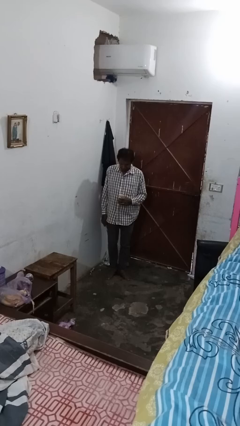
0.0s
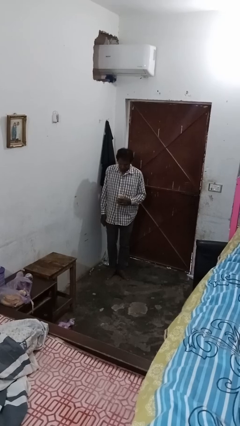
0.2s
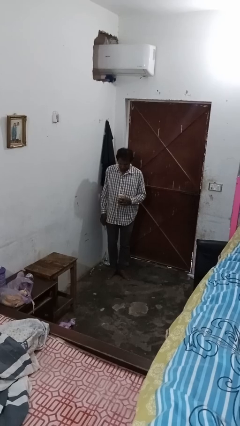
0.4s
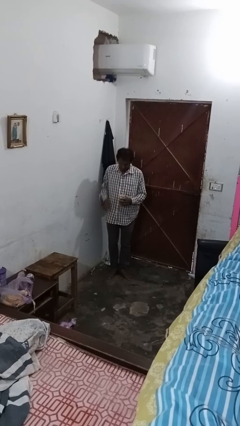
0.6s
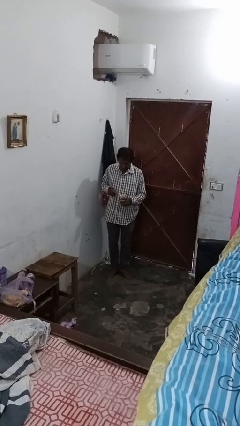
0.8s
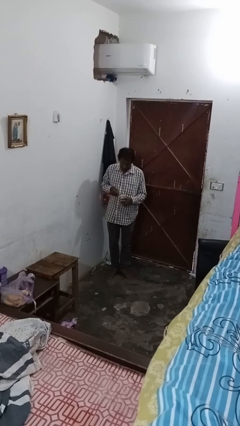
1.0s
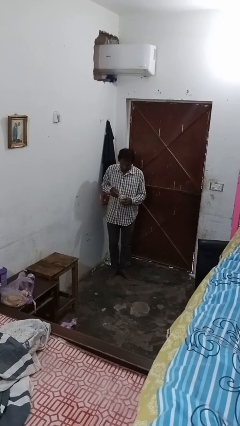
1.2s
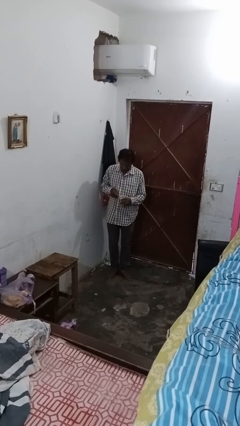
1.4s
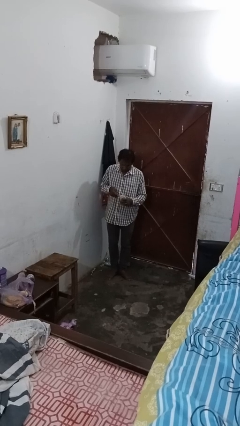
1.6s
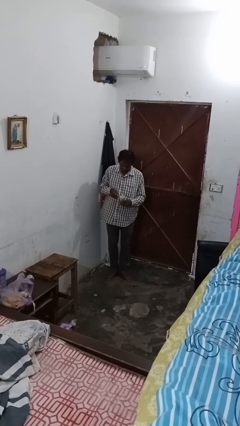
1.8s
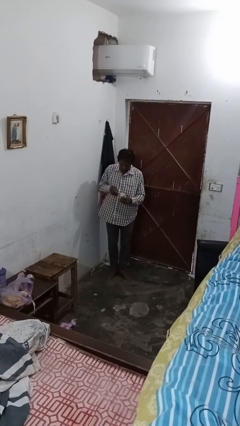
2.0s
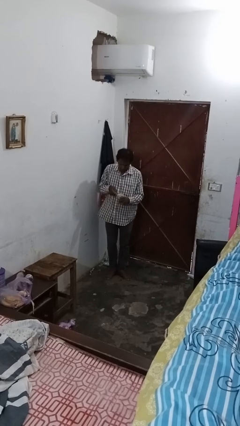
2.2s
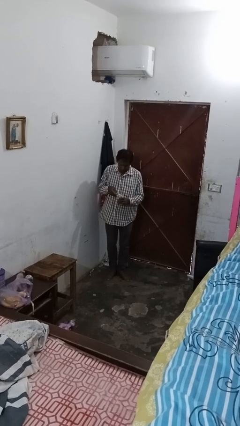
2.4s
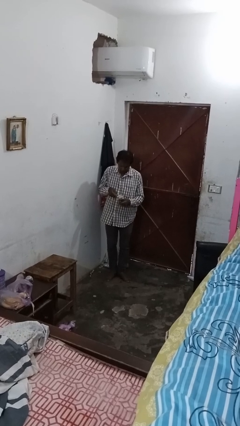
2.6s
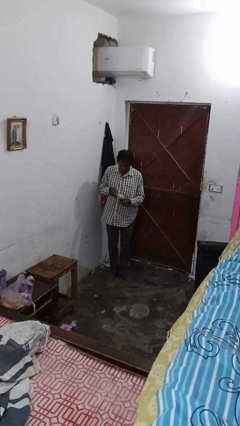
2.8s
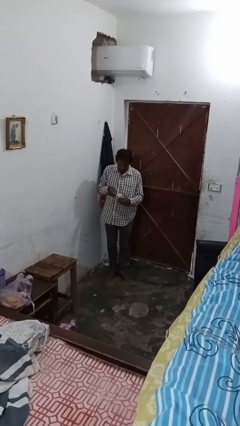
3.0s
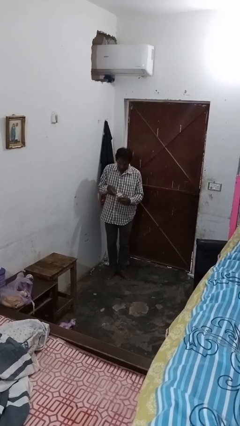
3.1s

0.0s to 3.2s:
person opens can with can opener

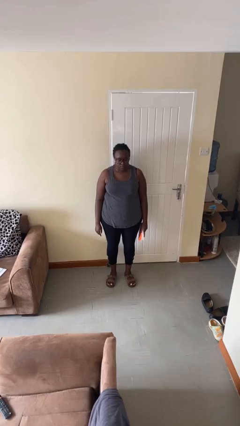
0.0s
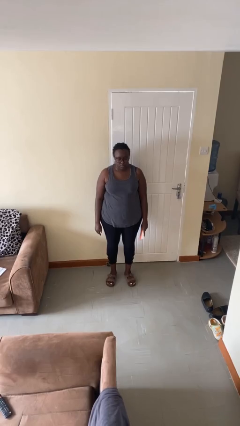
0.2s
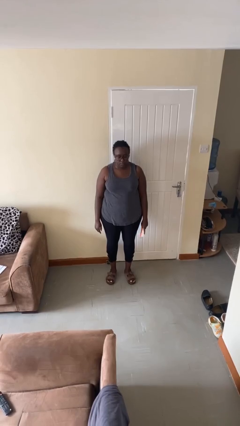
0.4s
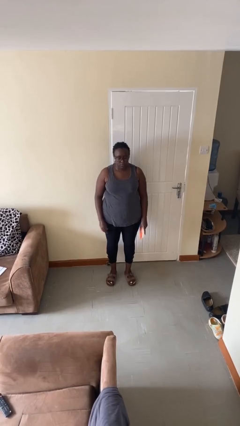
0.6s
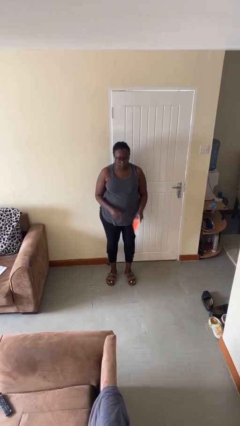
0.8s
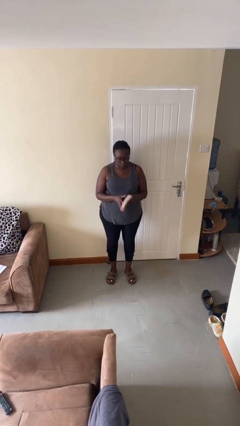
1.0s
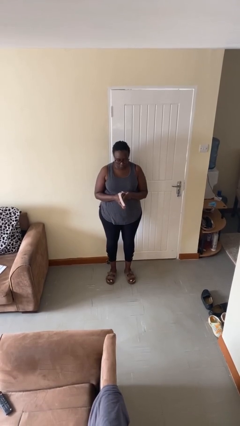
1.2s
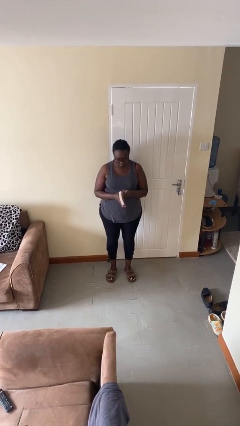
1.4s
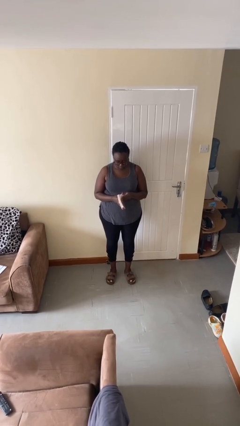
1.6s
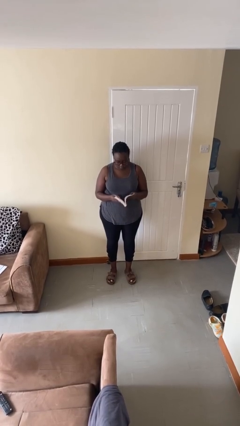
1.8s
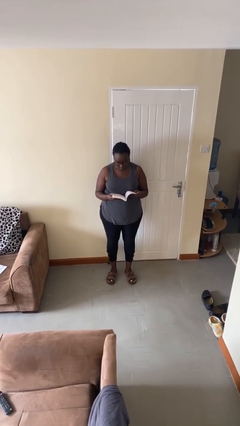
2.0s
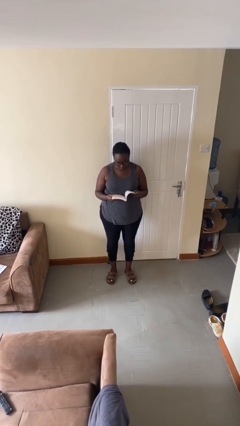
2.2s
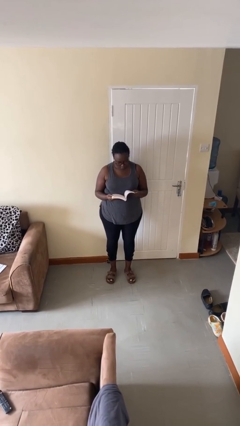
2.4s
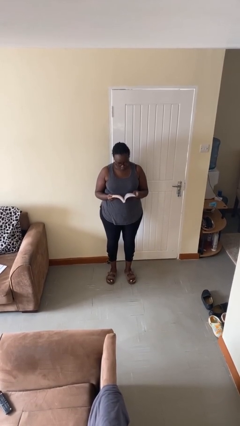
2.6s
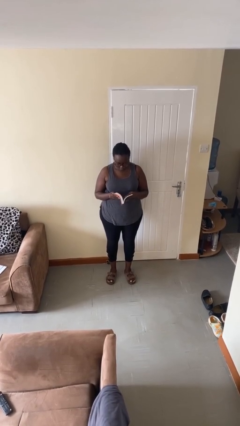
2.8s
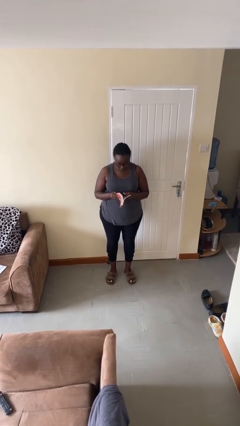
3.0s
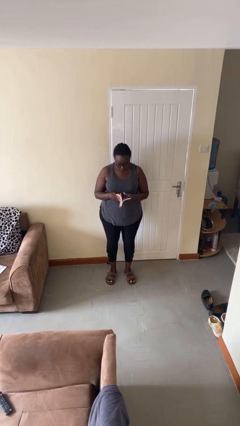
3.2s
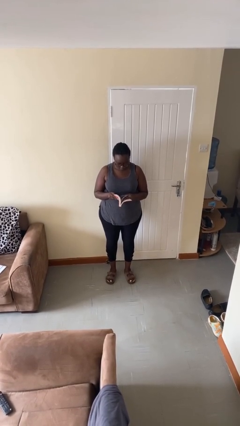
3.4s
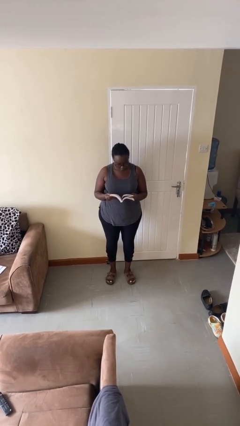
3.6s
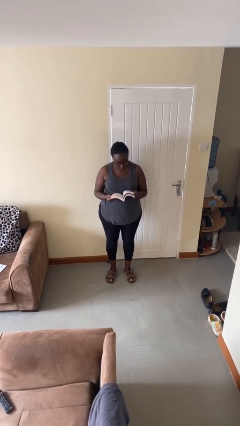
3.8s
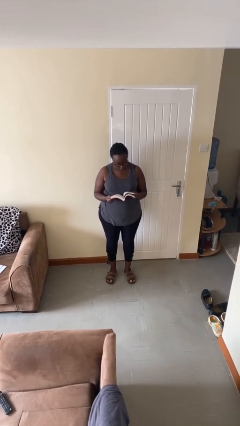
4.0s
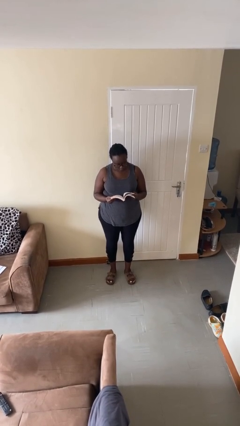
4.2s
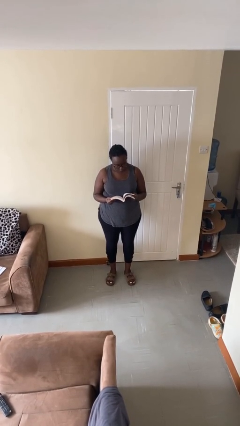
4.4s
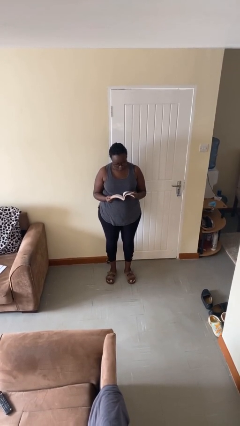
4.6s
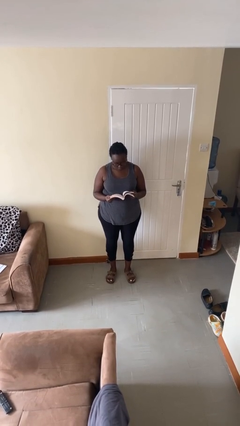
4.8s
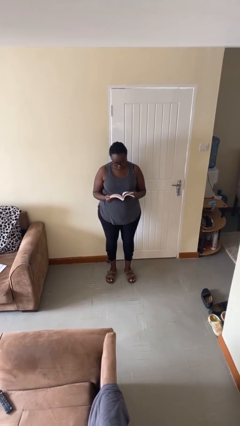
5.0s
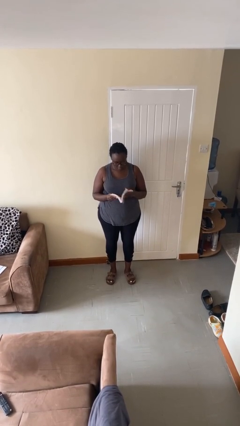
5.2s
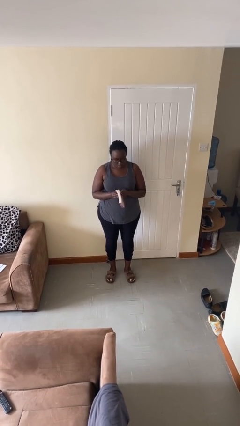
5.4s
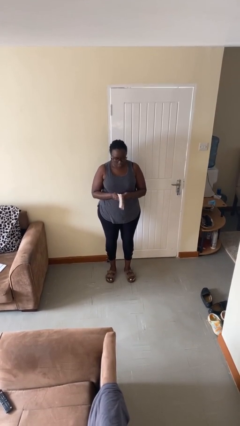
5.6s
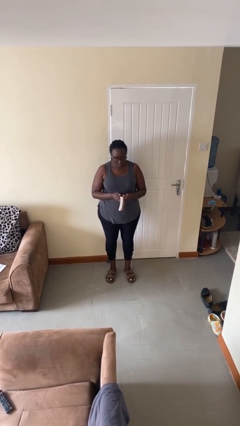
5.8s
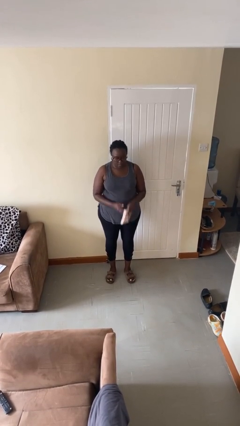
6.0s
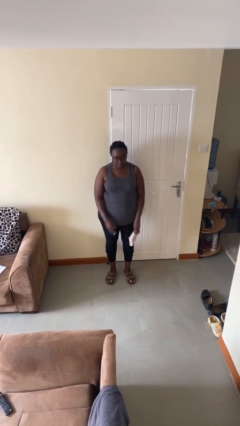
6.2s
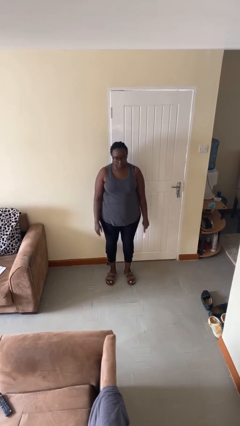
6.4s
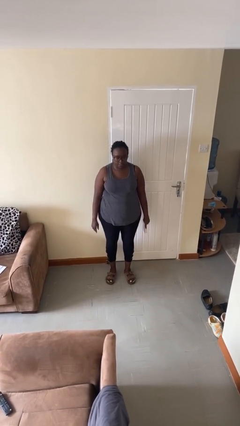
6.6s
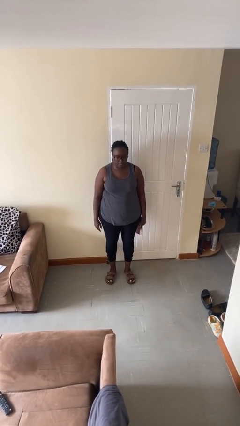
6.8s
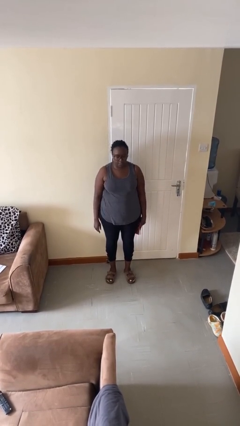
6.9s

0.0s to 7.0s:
person reads book

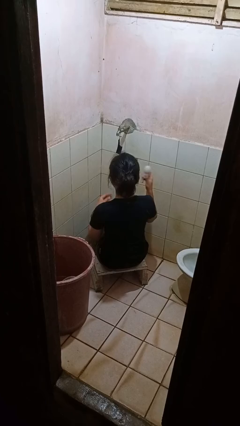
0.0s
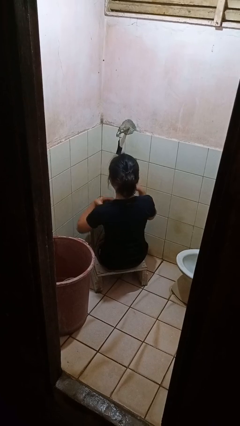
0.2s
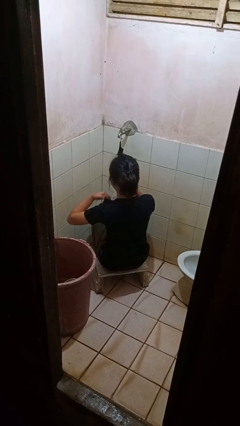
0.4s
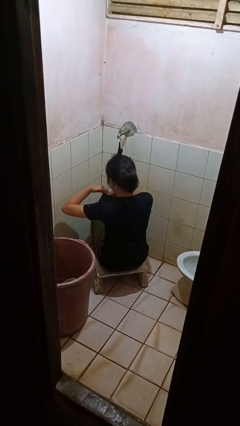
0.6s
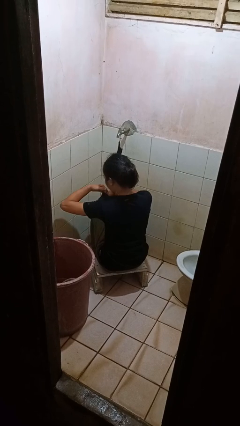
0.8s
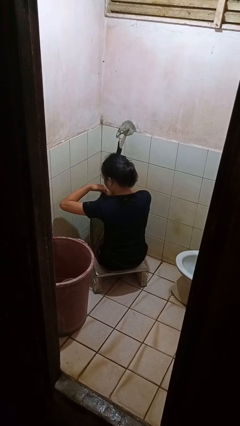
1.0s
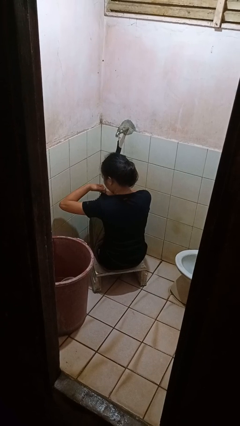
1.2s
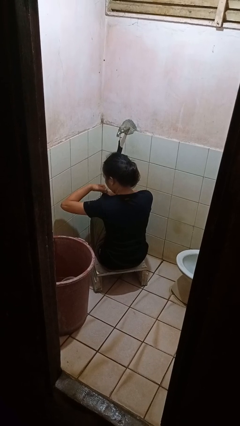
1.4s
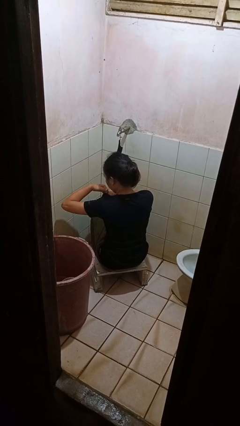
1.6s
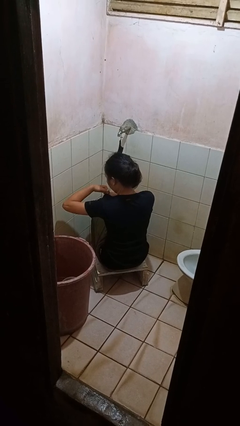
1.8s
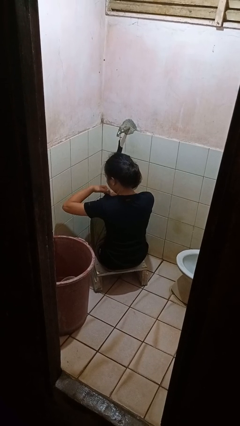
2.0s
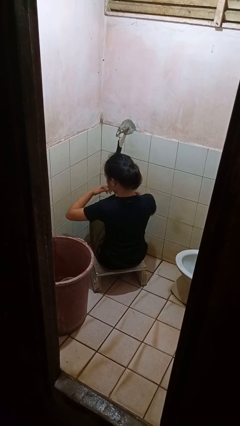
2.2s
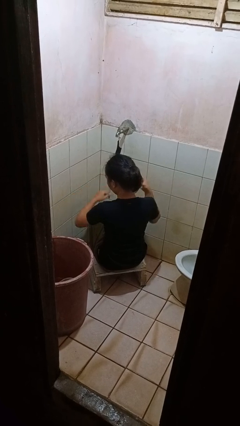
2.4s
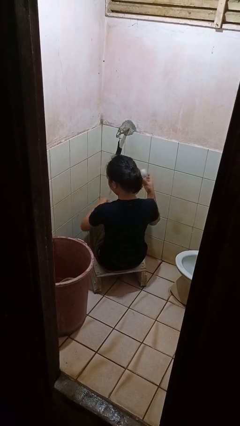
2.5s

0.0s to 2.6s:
person applies deodorant

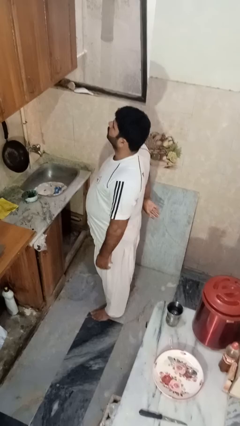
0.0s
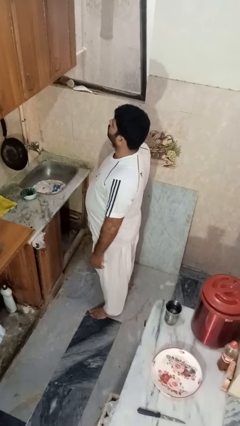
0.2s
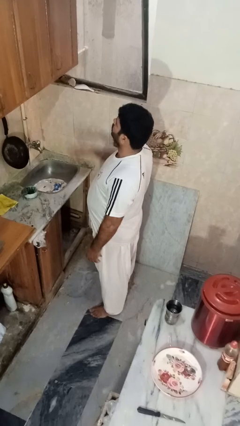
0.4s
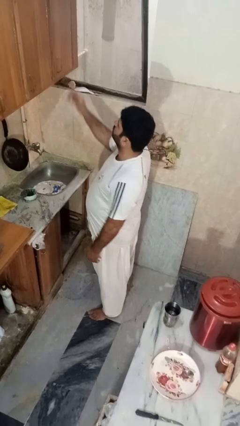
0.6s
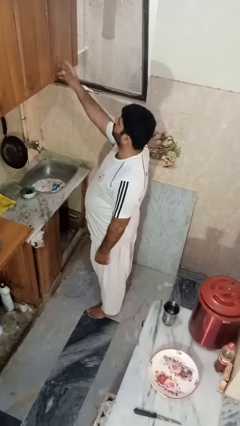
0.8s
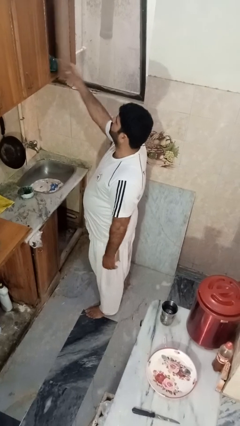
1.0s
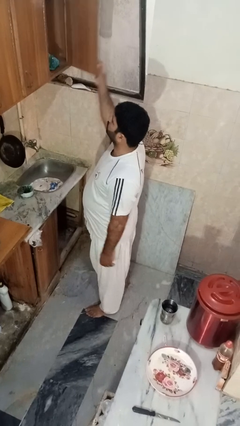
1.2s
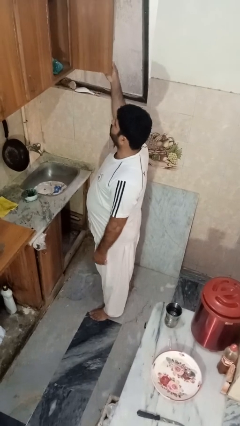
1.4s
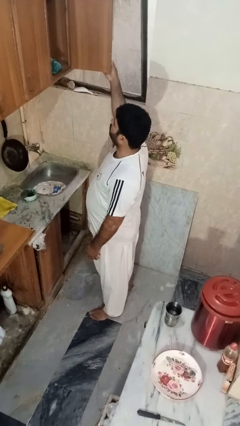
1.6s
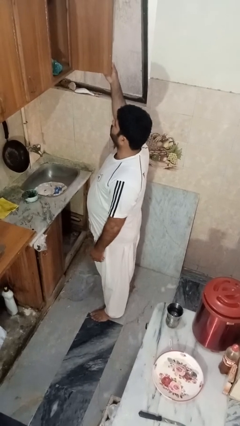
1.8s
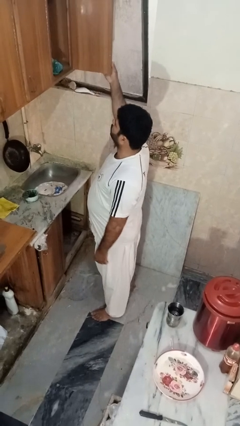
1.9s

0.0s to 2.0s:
person opens cabinet

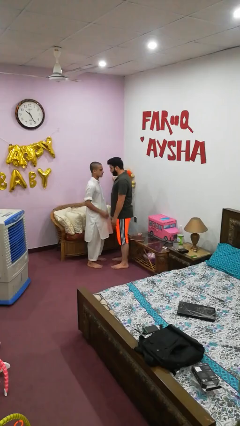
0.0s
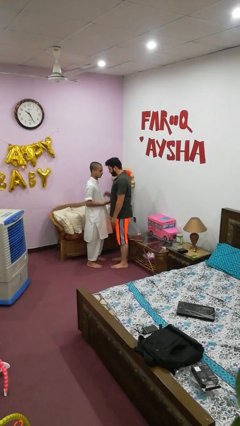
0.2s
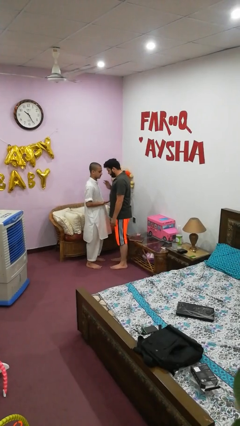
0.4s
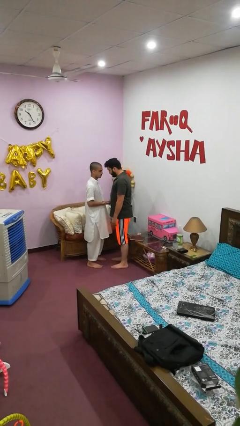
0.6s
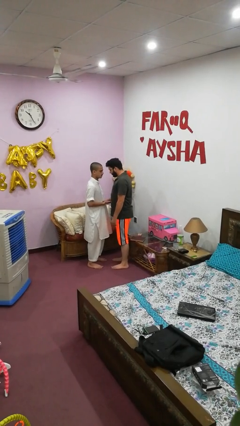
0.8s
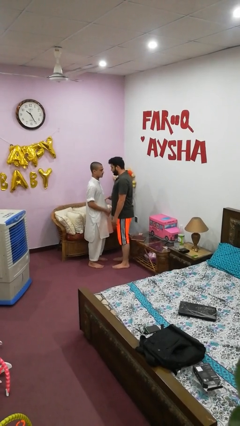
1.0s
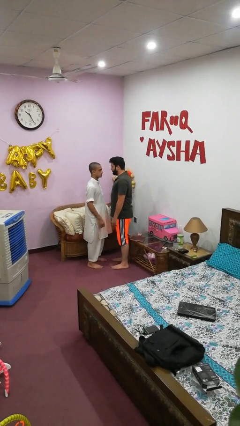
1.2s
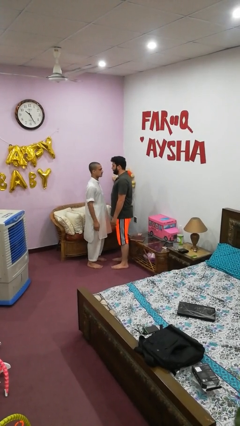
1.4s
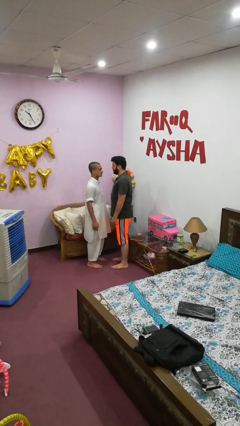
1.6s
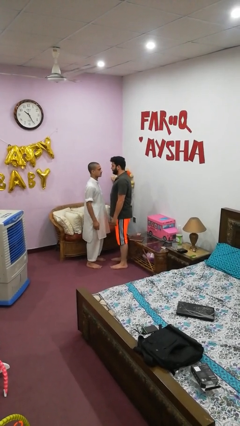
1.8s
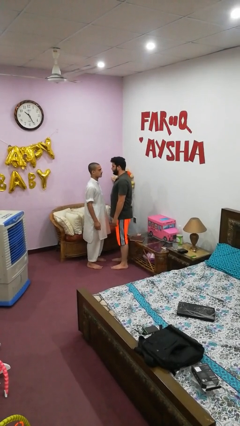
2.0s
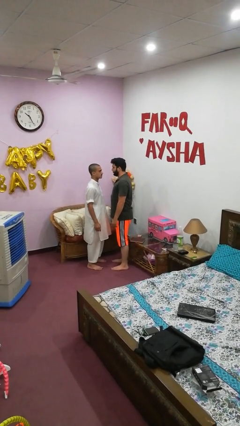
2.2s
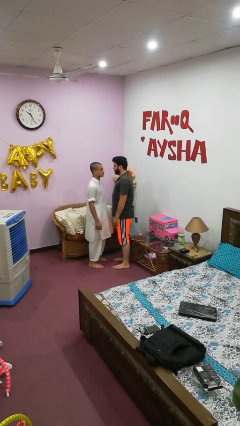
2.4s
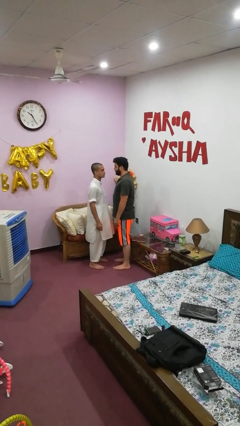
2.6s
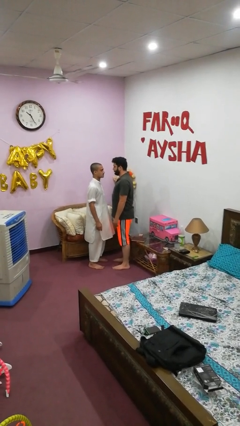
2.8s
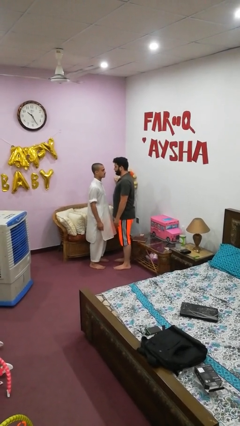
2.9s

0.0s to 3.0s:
person highfives hand

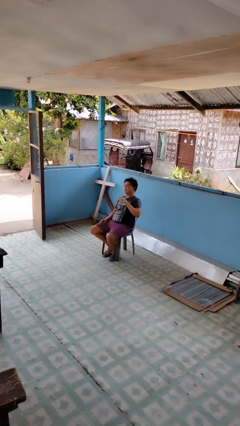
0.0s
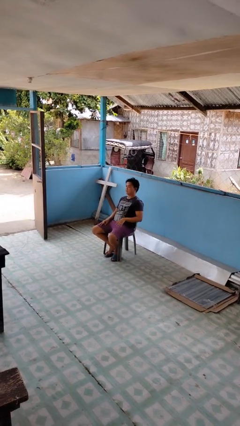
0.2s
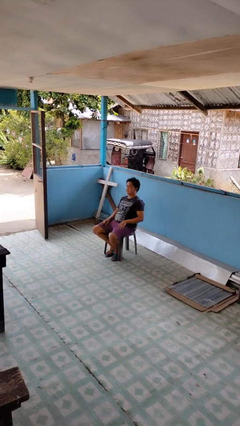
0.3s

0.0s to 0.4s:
person gestures lower hand
